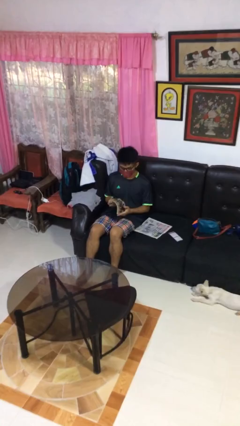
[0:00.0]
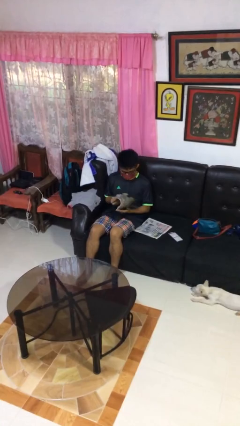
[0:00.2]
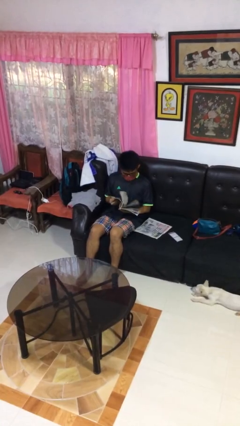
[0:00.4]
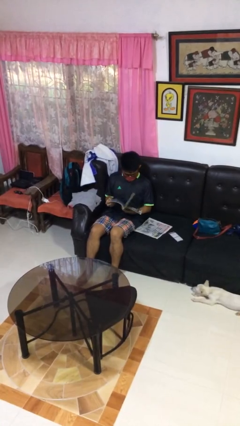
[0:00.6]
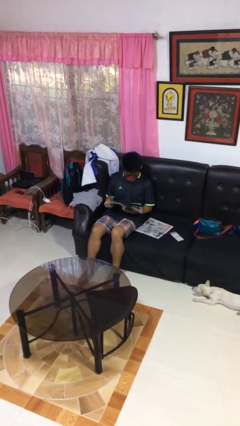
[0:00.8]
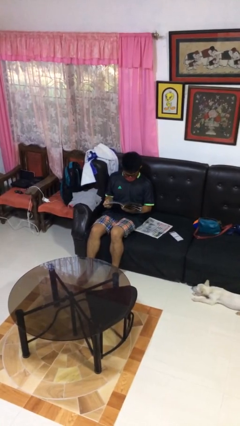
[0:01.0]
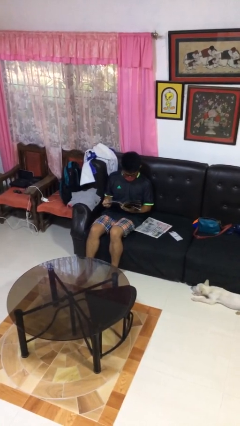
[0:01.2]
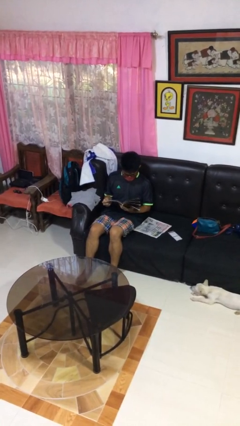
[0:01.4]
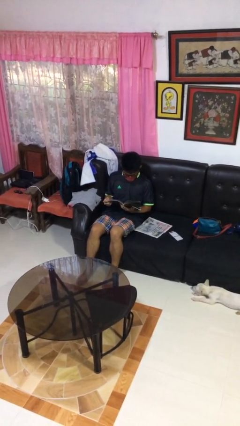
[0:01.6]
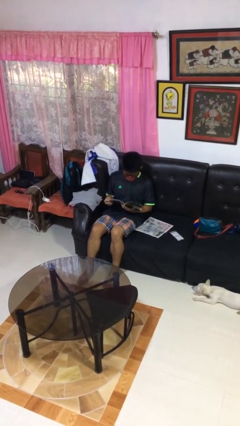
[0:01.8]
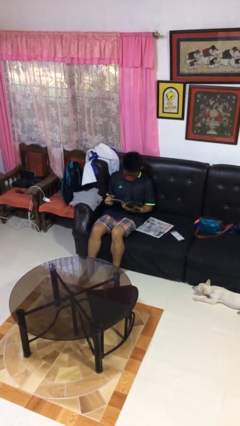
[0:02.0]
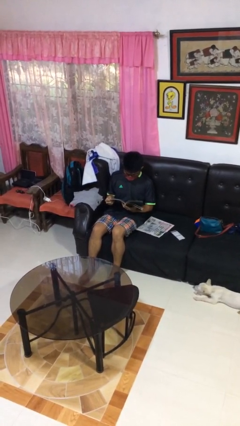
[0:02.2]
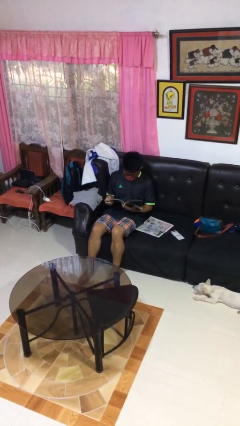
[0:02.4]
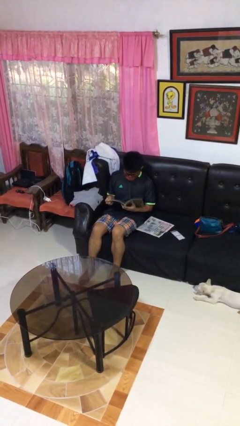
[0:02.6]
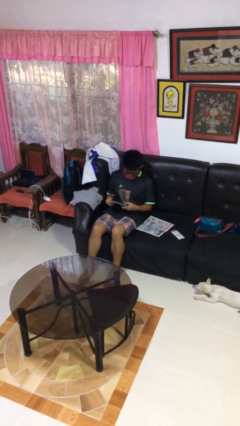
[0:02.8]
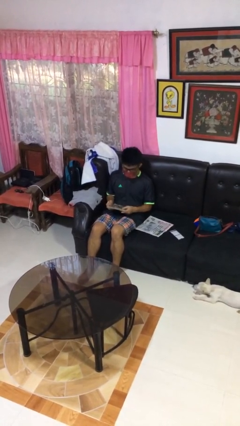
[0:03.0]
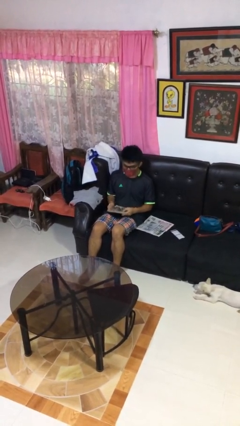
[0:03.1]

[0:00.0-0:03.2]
person reads magazine

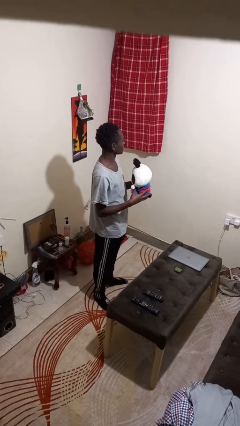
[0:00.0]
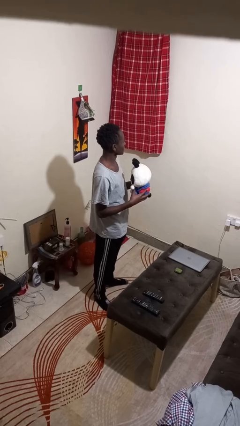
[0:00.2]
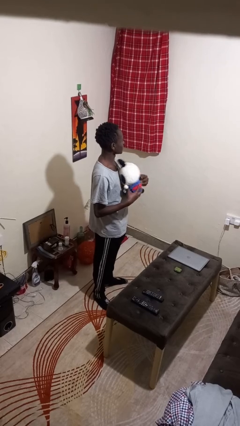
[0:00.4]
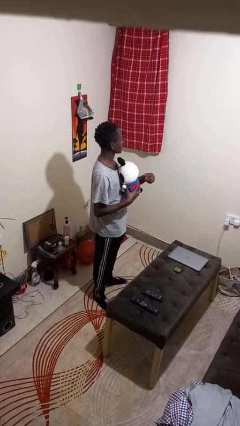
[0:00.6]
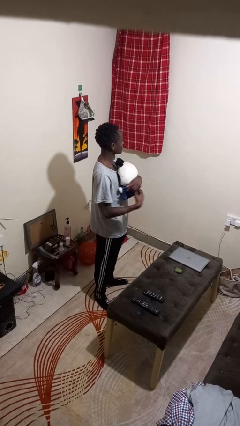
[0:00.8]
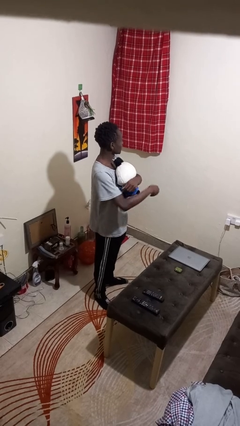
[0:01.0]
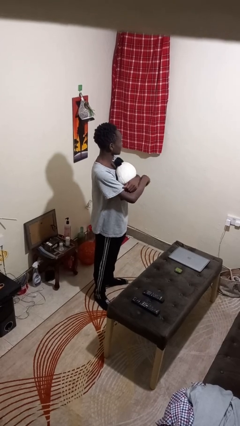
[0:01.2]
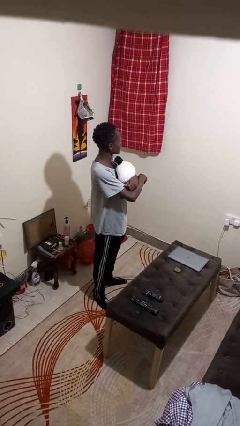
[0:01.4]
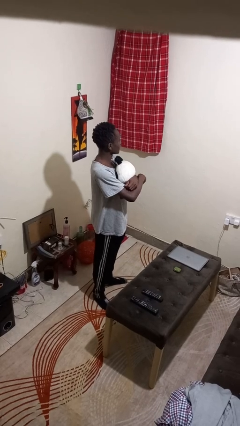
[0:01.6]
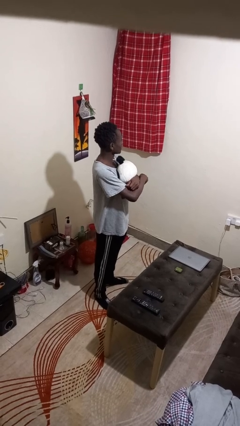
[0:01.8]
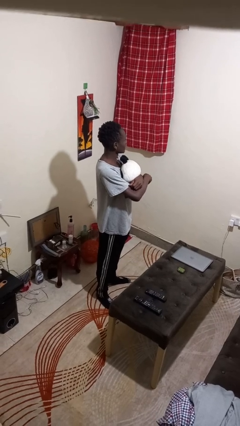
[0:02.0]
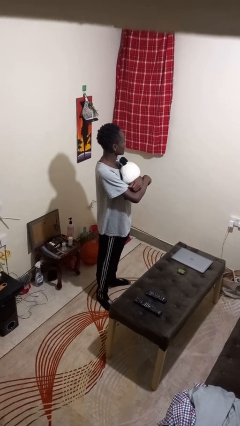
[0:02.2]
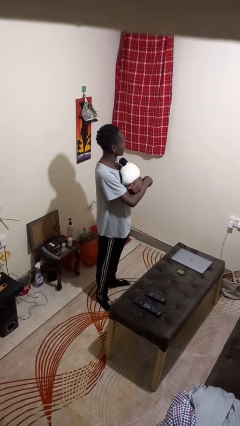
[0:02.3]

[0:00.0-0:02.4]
person hugs stuffed animal

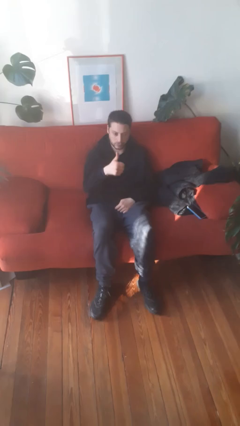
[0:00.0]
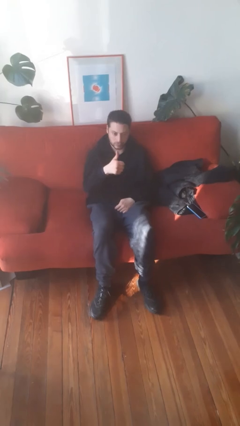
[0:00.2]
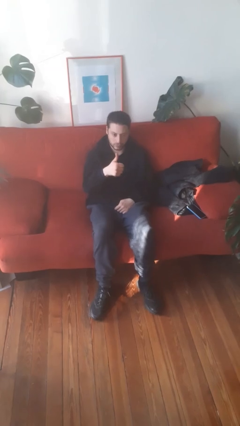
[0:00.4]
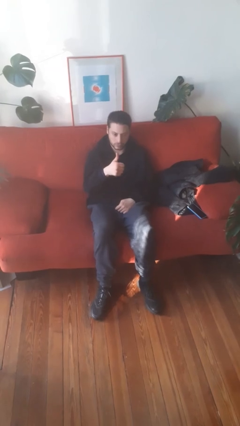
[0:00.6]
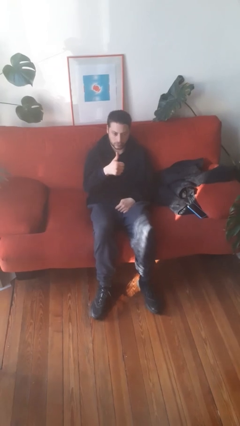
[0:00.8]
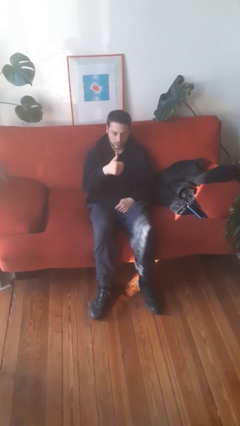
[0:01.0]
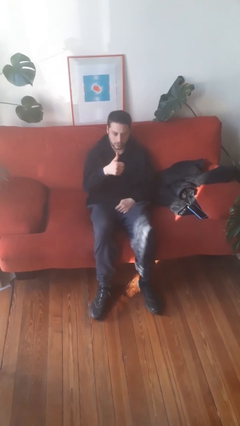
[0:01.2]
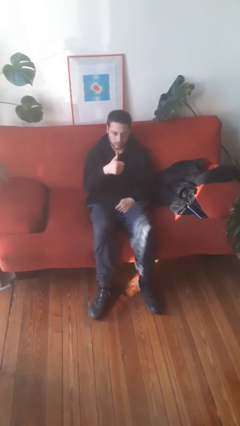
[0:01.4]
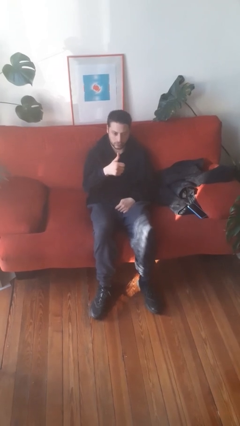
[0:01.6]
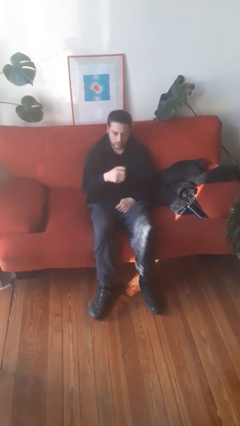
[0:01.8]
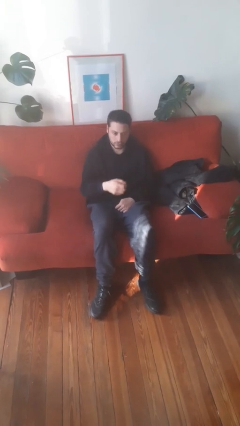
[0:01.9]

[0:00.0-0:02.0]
person gestures thumbs up

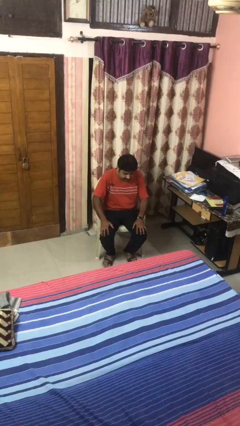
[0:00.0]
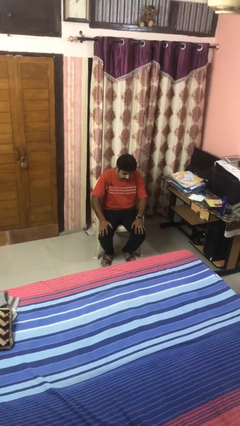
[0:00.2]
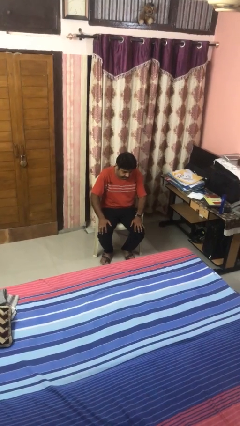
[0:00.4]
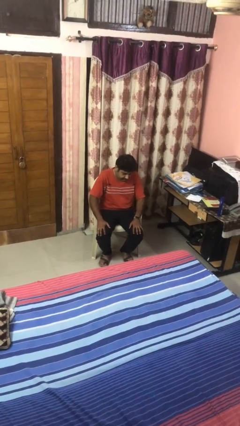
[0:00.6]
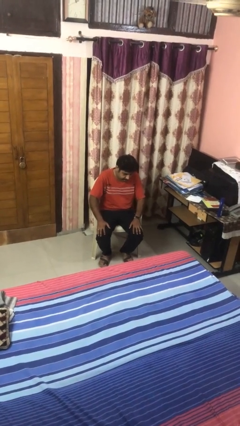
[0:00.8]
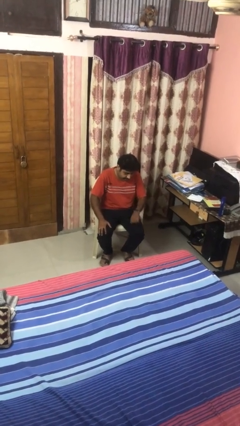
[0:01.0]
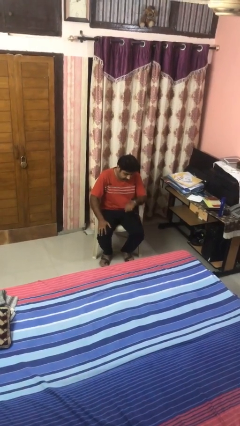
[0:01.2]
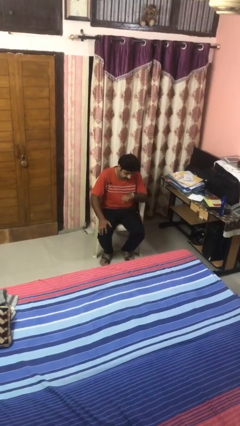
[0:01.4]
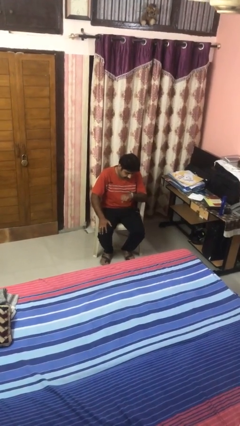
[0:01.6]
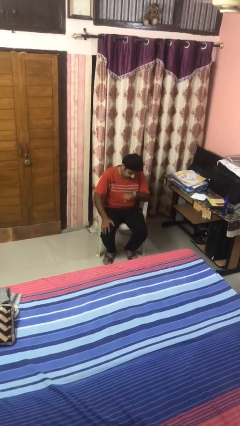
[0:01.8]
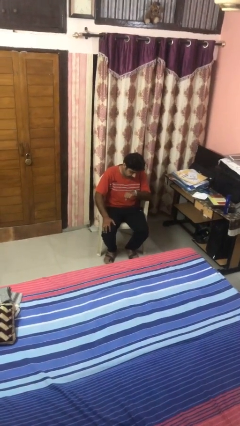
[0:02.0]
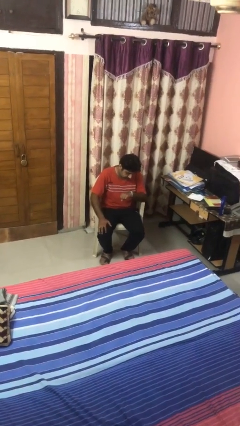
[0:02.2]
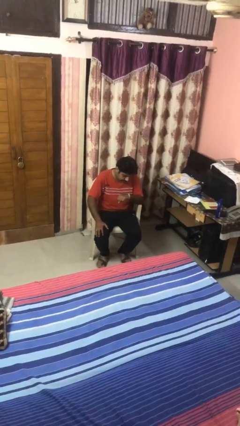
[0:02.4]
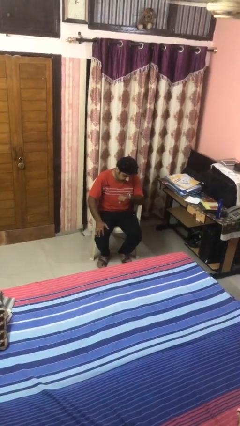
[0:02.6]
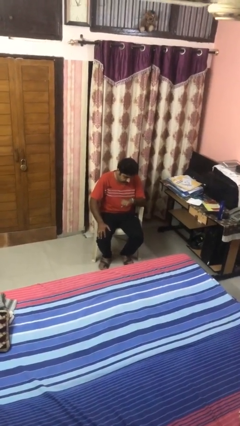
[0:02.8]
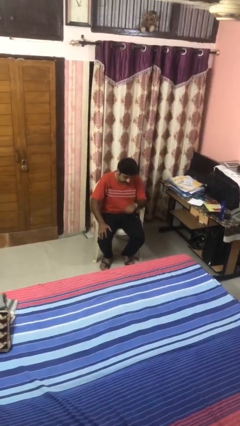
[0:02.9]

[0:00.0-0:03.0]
person looks at wristwatch

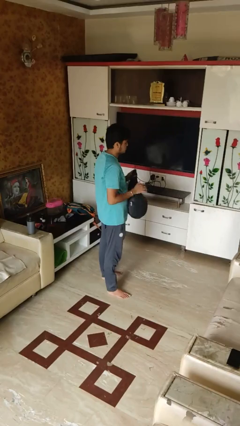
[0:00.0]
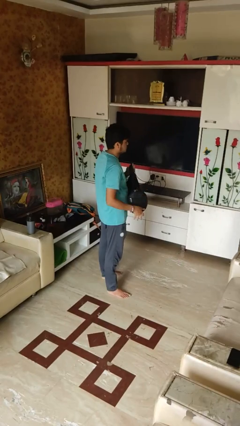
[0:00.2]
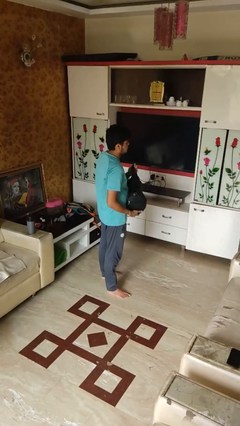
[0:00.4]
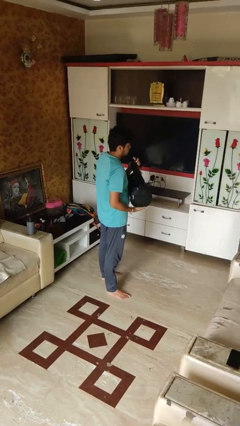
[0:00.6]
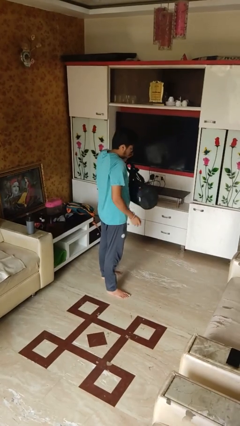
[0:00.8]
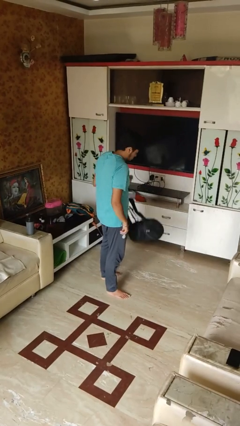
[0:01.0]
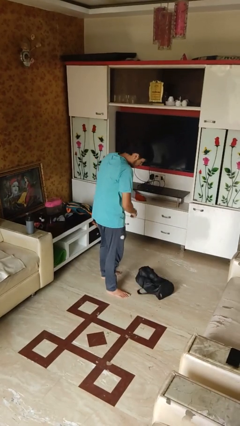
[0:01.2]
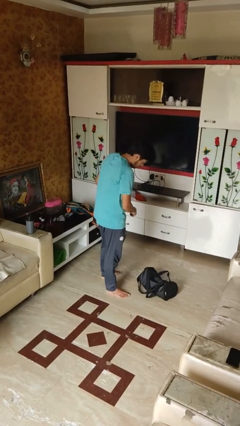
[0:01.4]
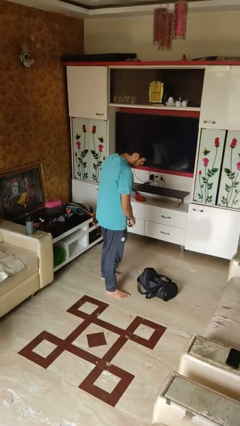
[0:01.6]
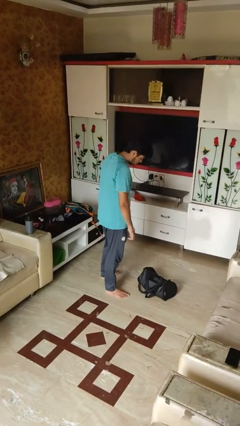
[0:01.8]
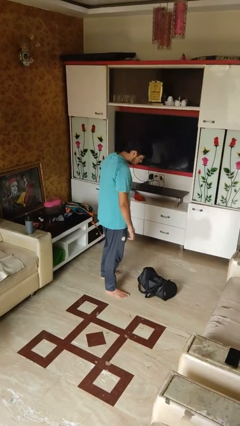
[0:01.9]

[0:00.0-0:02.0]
person drops object

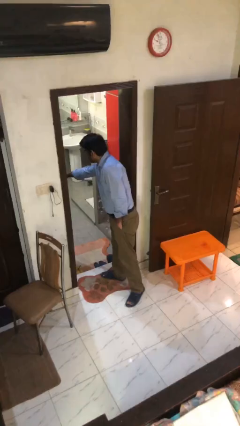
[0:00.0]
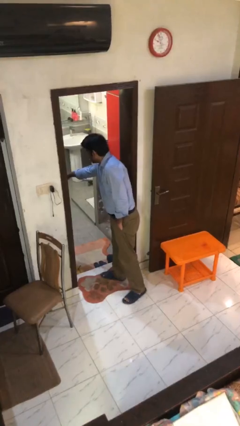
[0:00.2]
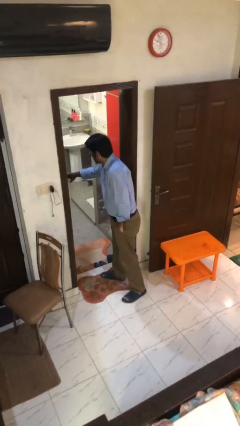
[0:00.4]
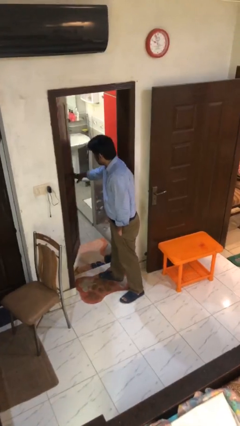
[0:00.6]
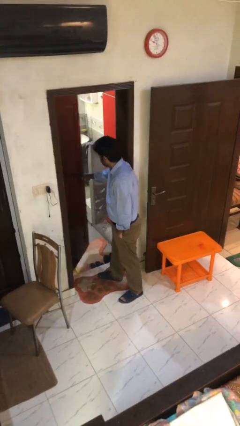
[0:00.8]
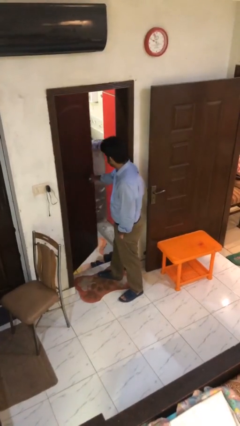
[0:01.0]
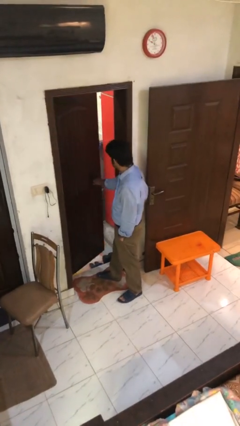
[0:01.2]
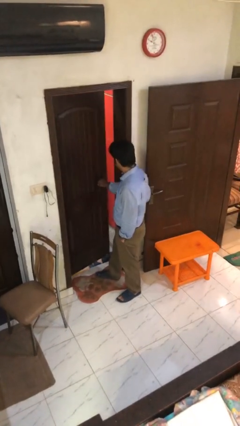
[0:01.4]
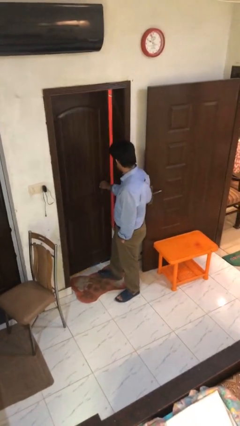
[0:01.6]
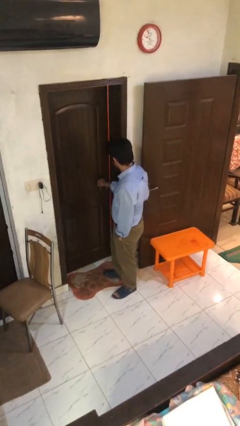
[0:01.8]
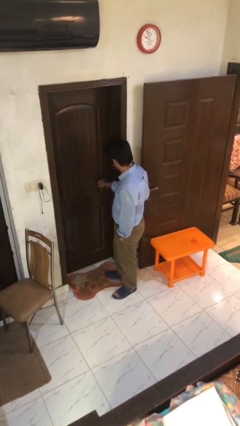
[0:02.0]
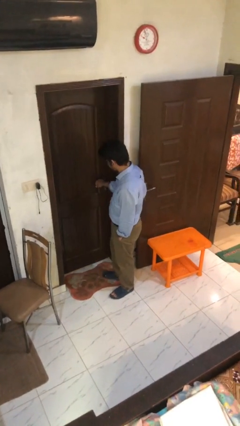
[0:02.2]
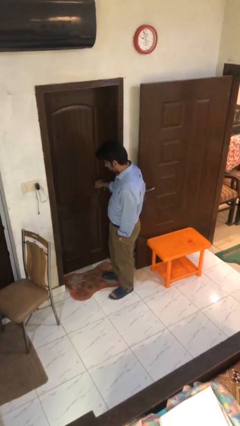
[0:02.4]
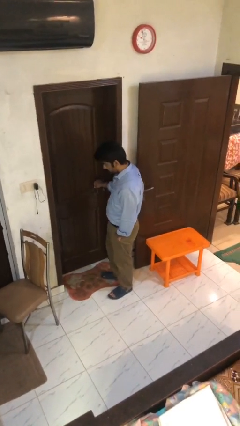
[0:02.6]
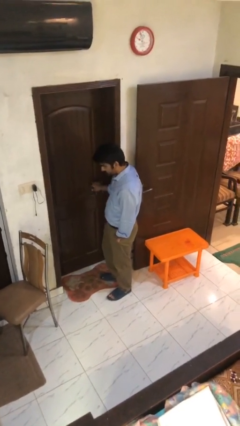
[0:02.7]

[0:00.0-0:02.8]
person closes facility door

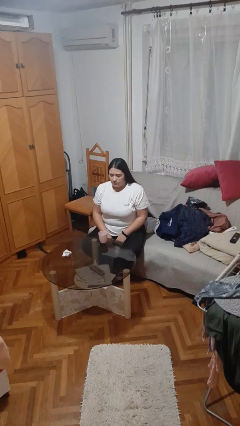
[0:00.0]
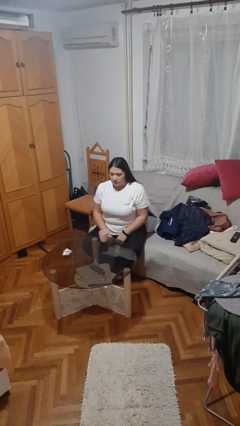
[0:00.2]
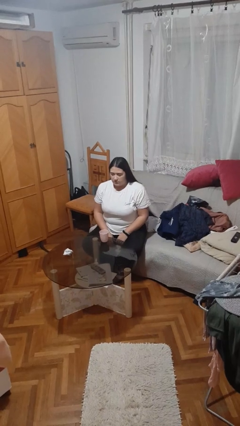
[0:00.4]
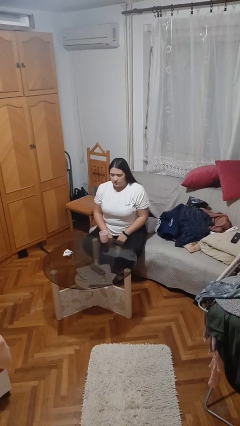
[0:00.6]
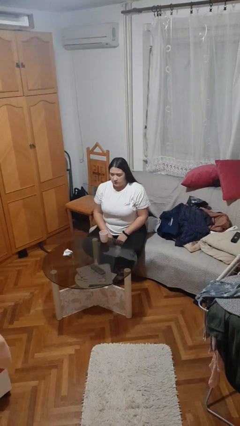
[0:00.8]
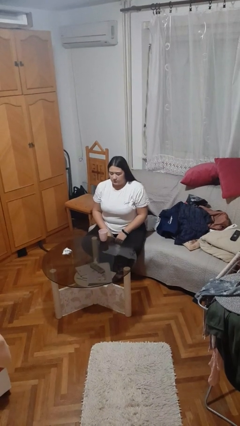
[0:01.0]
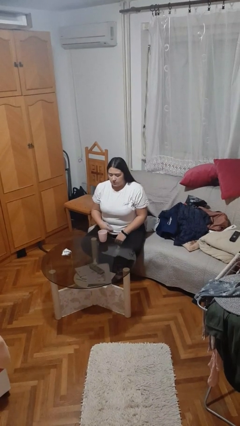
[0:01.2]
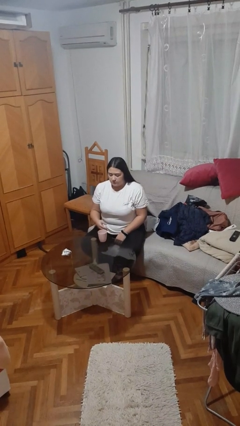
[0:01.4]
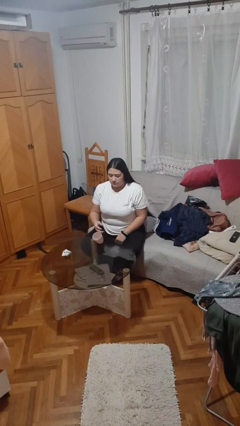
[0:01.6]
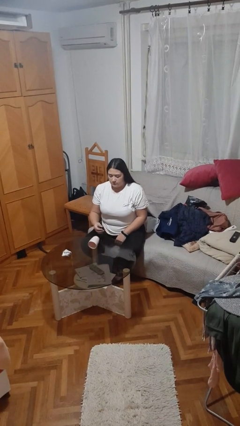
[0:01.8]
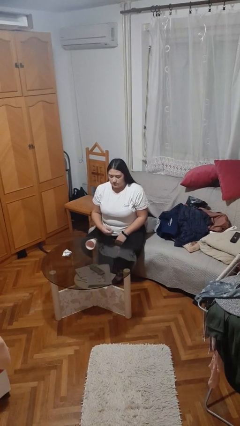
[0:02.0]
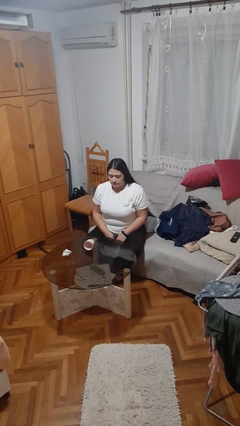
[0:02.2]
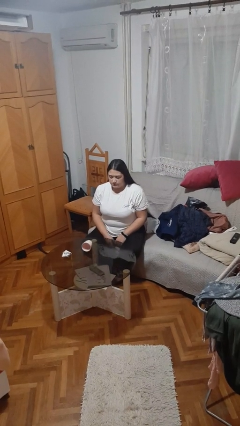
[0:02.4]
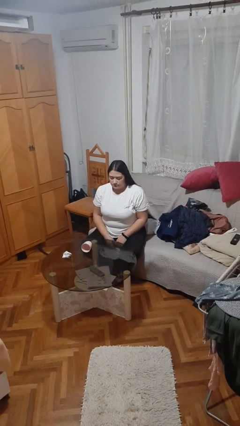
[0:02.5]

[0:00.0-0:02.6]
person spills on table
